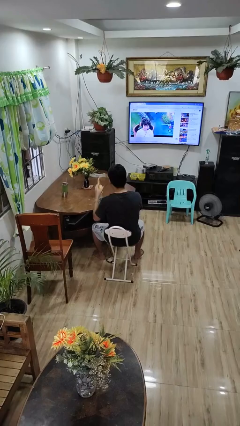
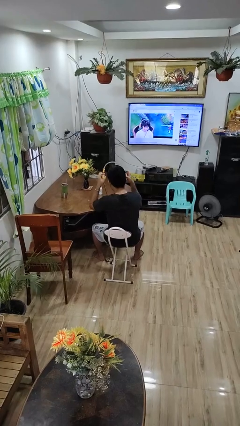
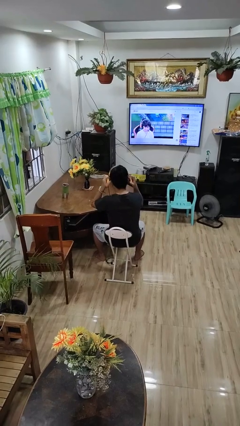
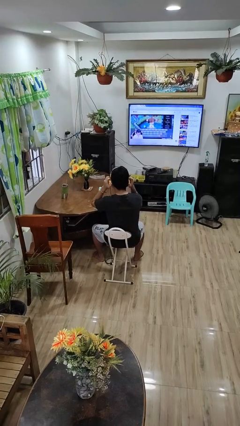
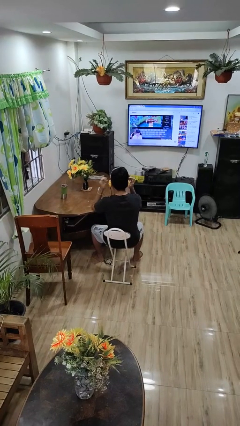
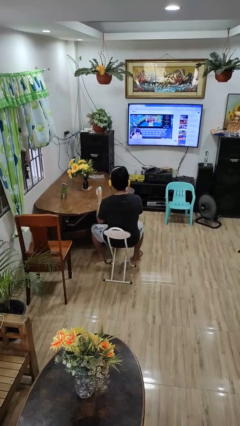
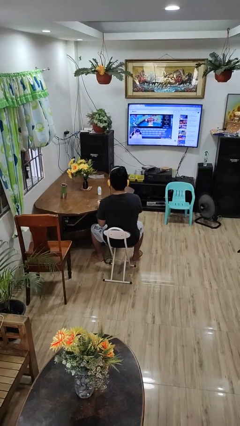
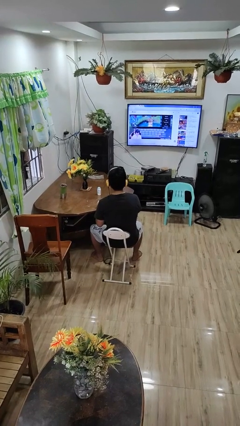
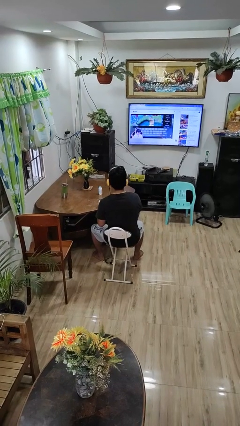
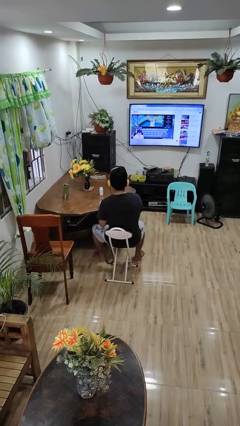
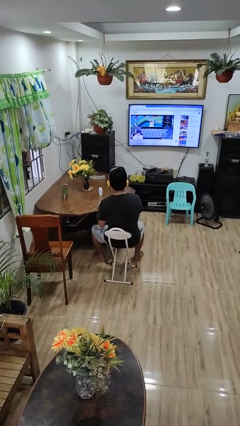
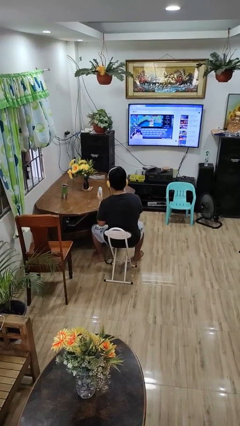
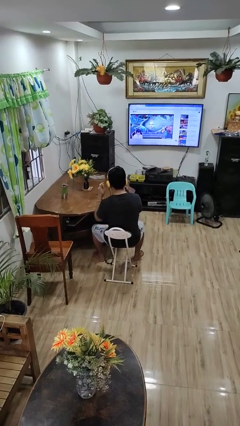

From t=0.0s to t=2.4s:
person puts on headphones

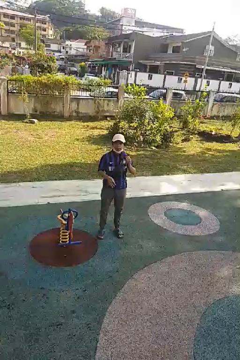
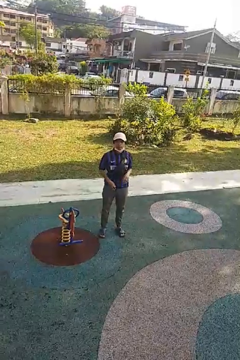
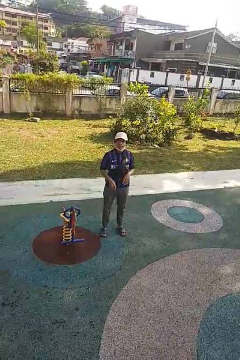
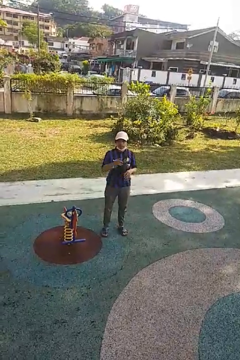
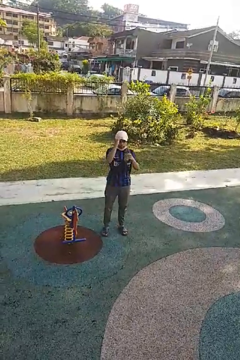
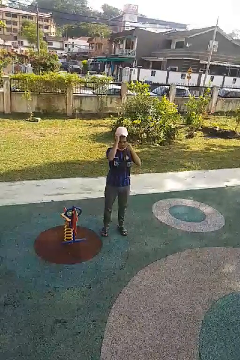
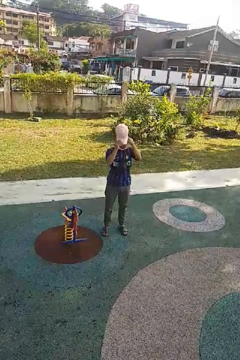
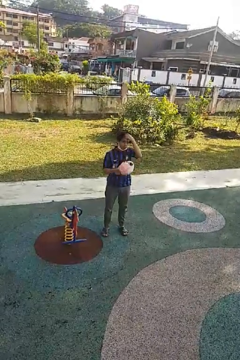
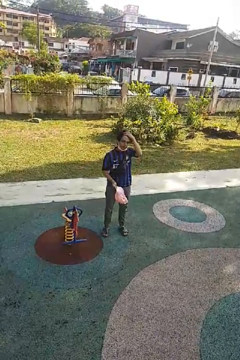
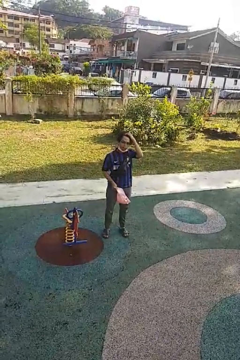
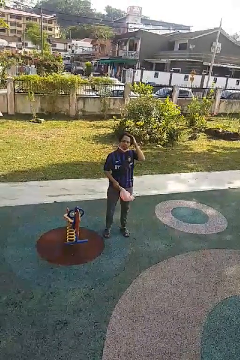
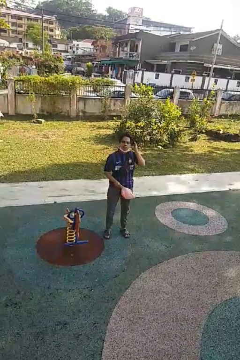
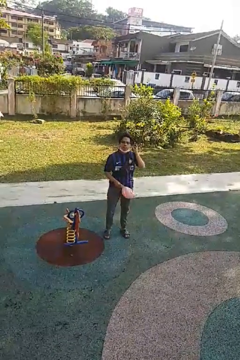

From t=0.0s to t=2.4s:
person takes off hat

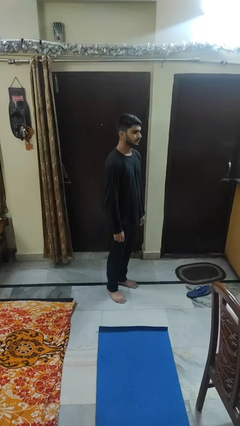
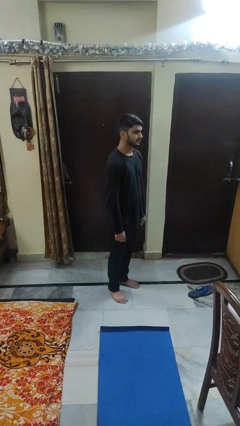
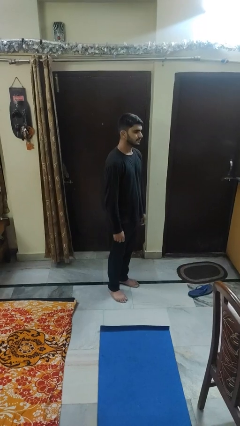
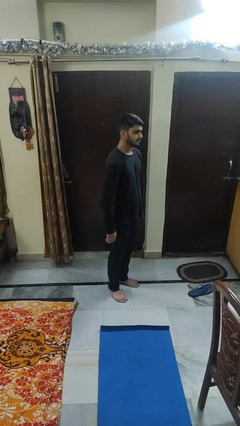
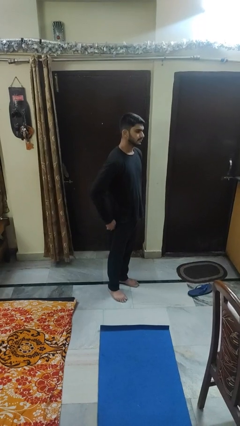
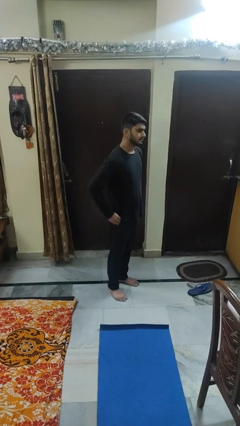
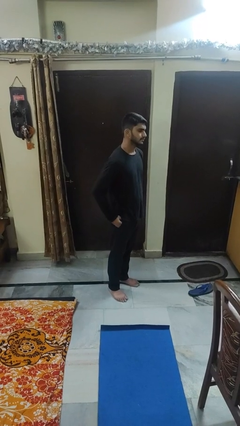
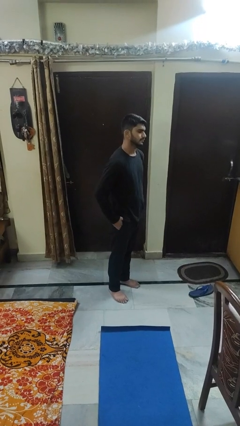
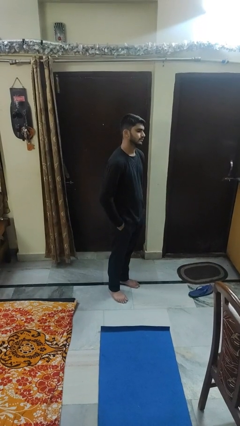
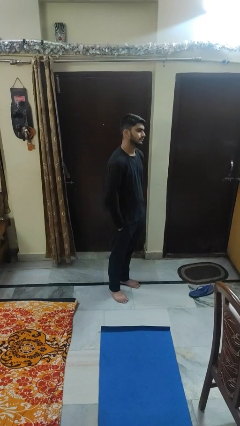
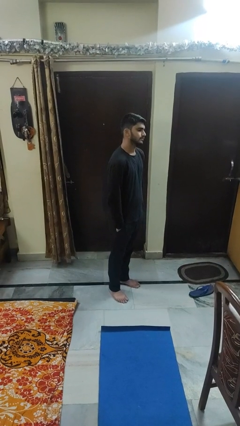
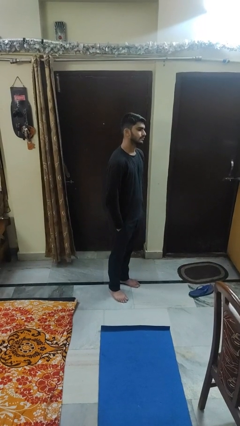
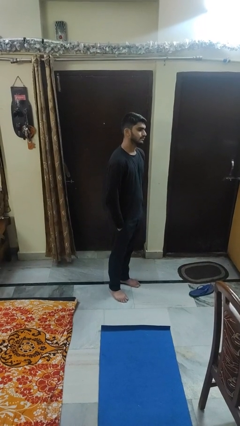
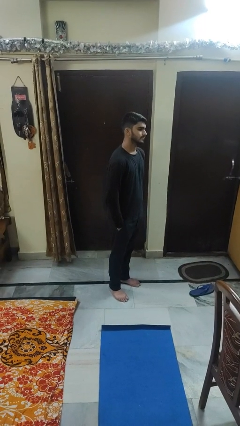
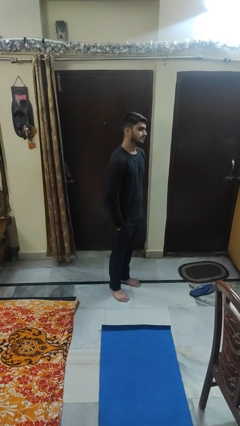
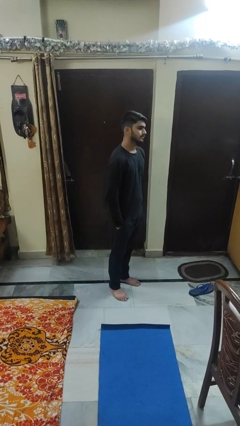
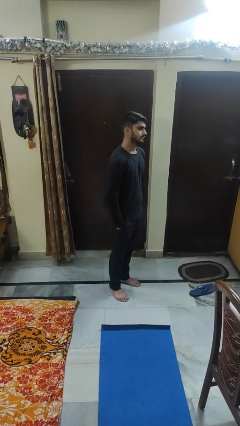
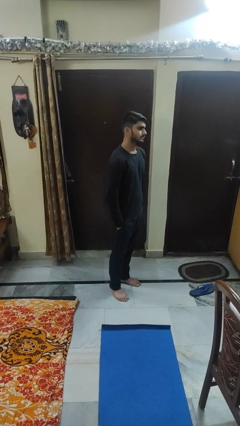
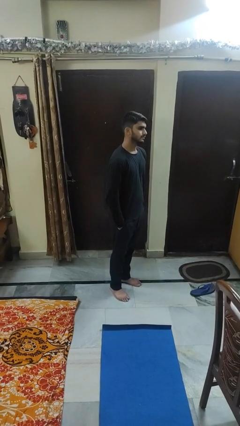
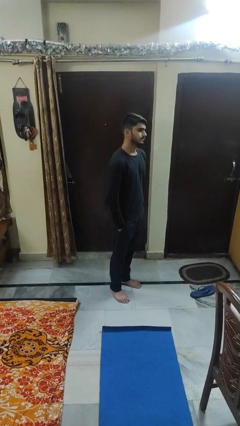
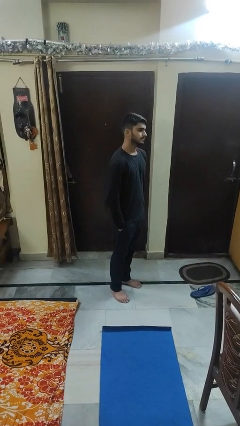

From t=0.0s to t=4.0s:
person puts hands in back pockets

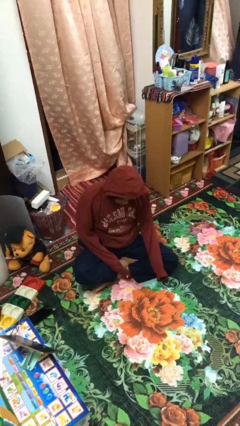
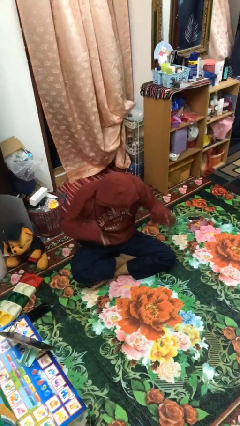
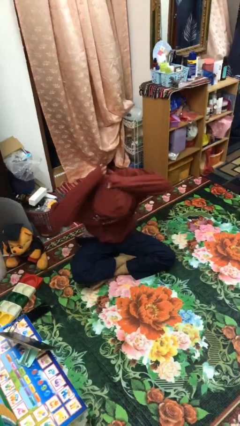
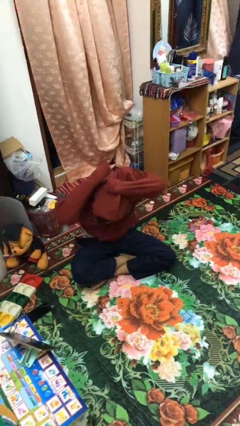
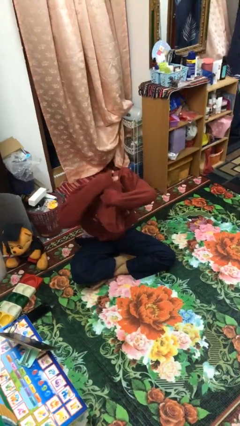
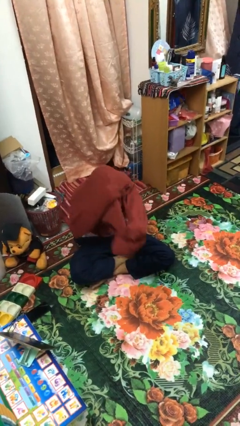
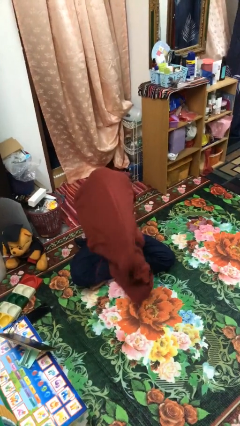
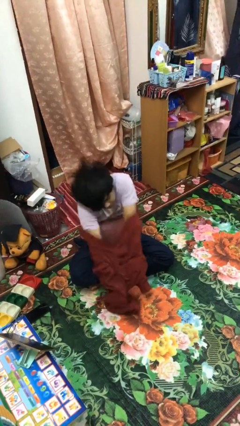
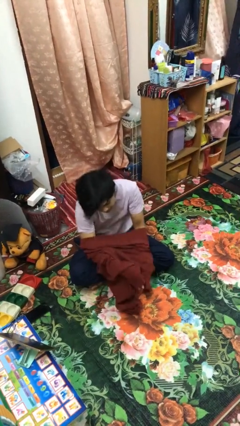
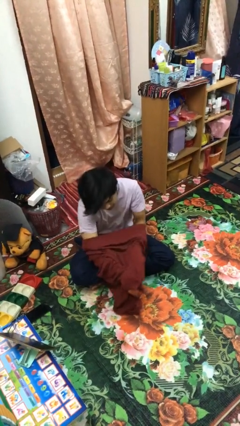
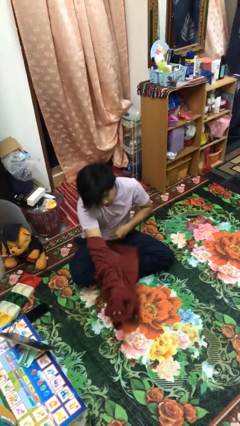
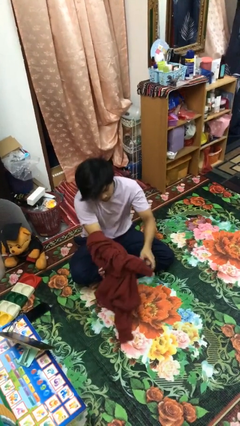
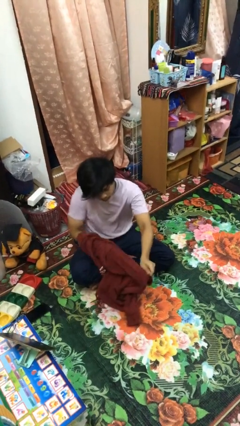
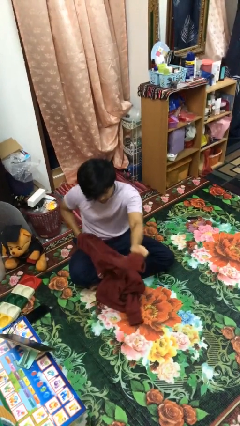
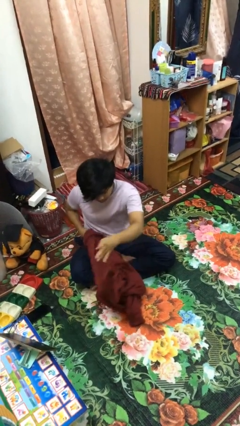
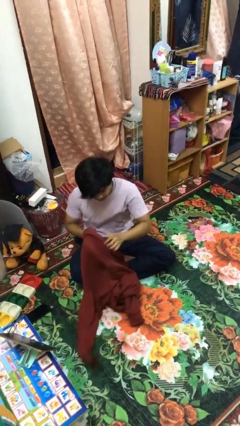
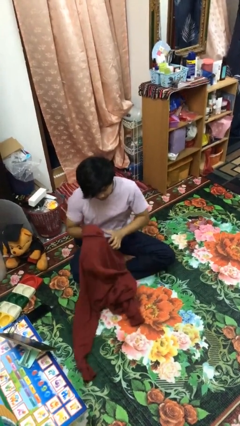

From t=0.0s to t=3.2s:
person takes off hoodie

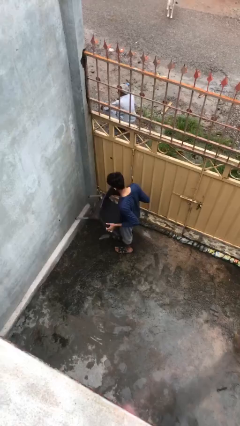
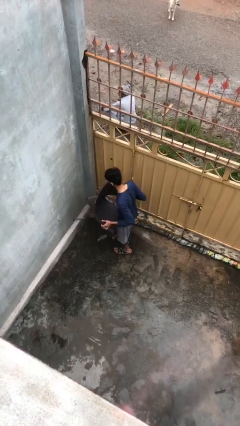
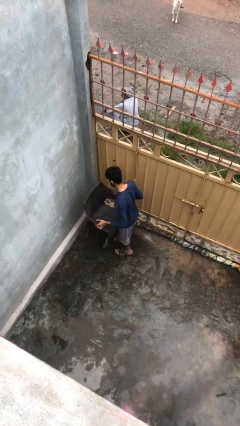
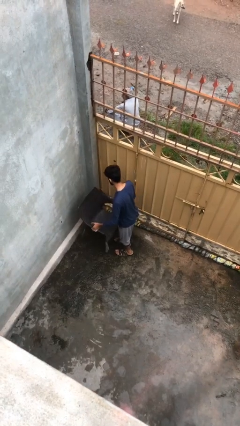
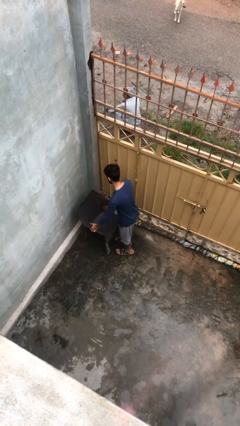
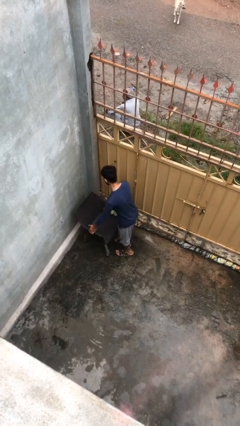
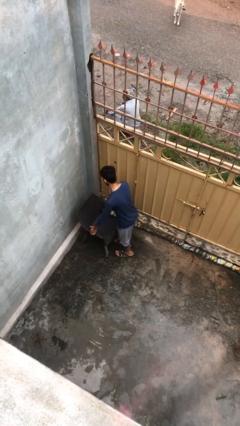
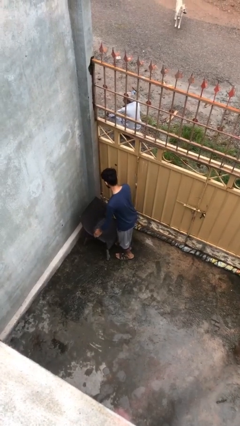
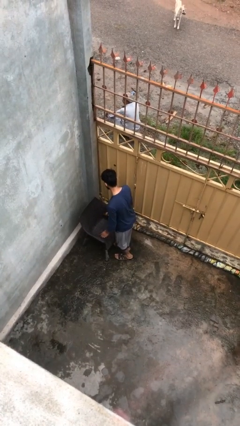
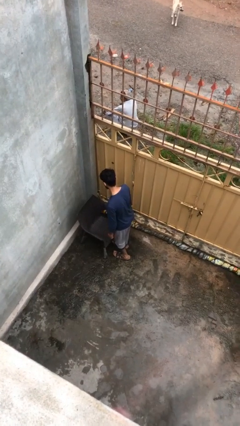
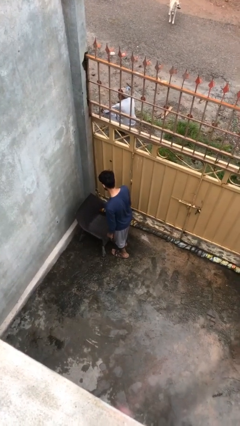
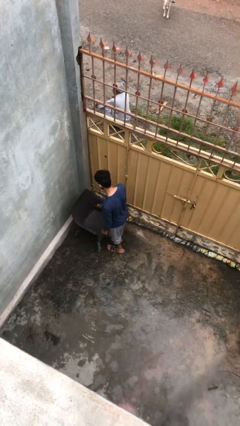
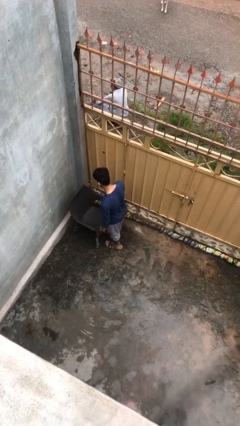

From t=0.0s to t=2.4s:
person puts down object on floor

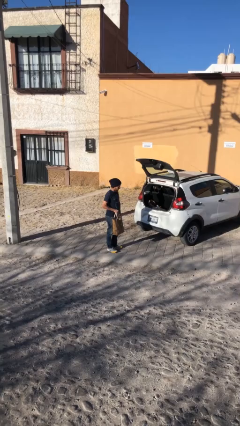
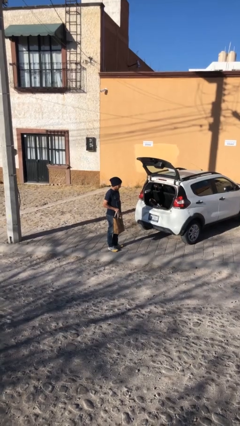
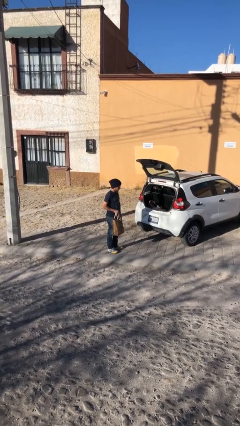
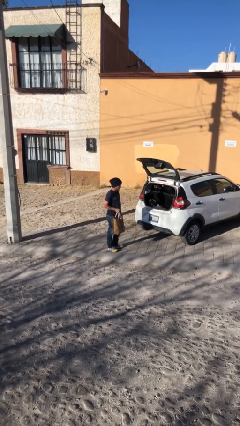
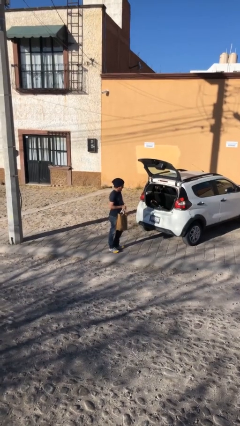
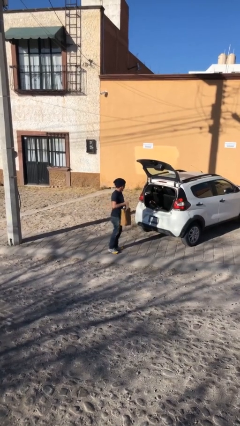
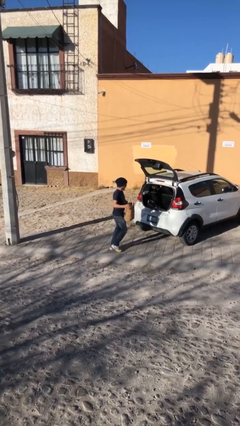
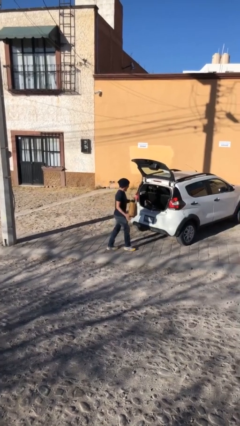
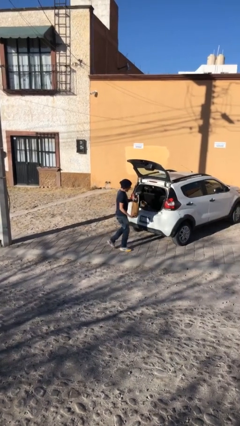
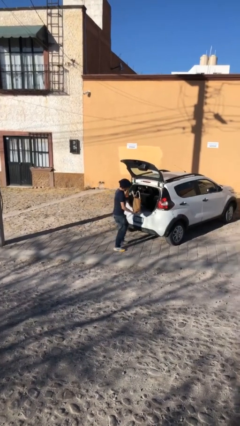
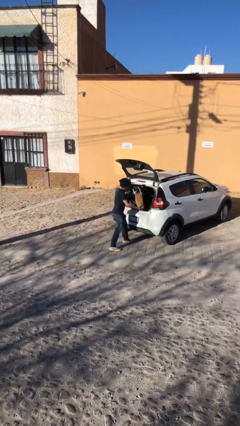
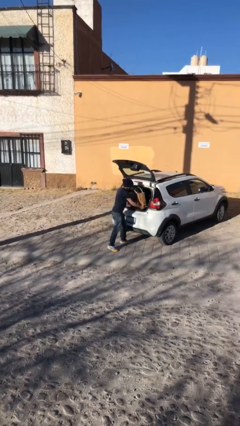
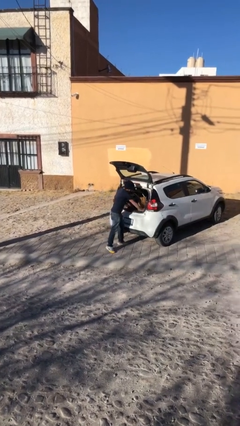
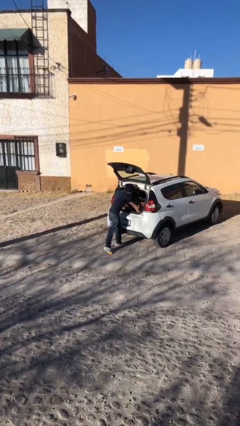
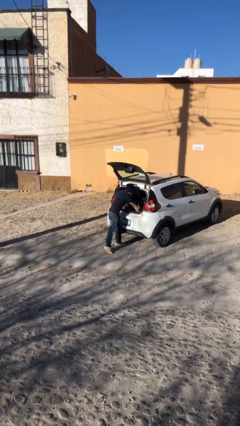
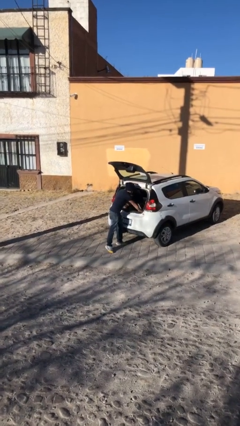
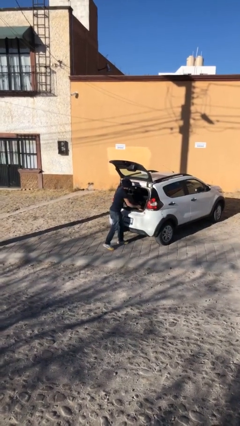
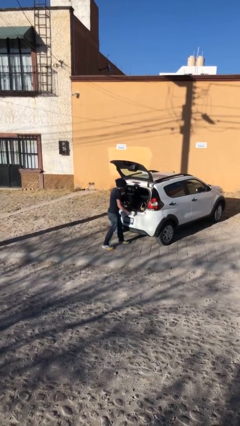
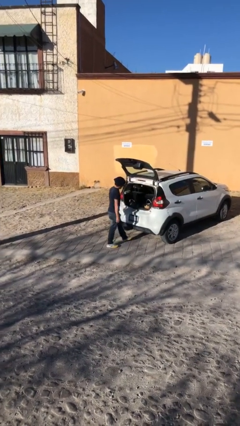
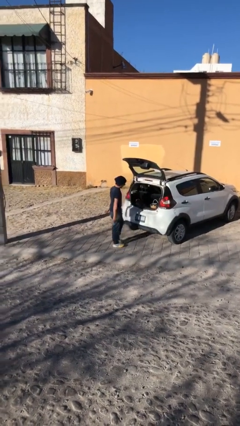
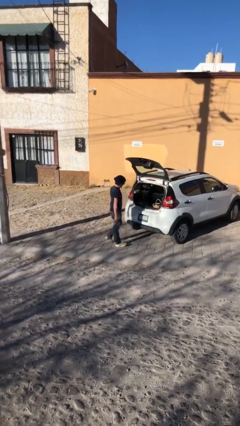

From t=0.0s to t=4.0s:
person loads car
